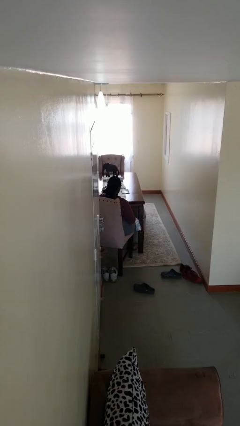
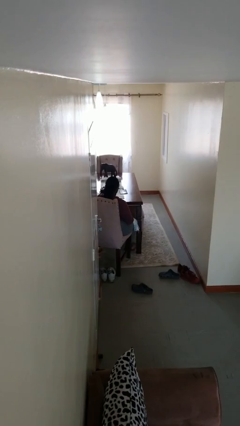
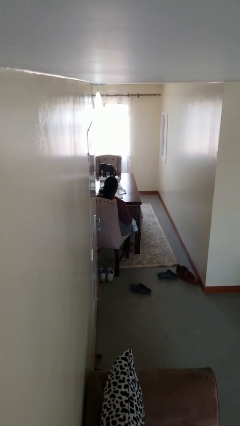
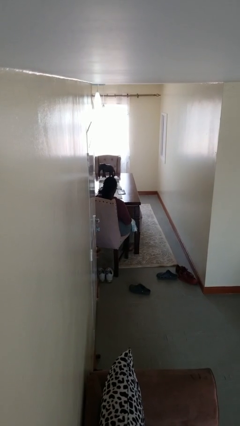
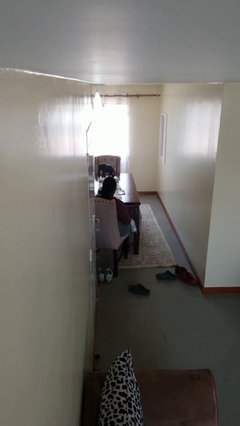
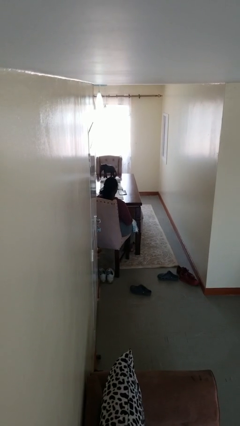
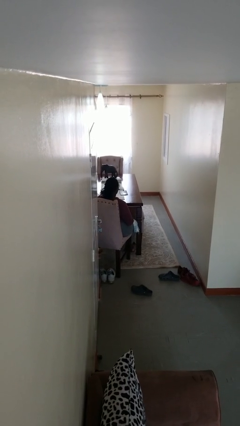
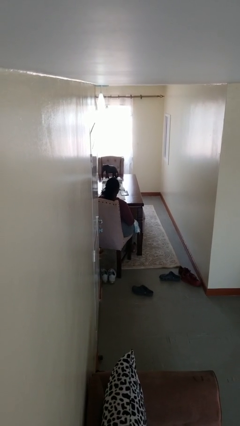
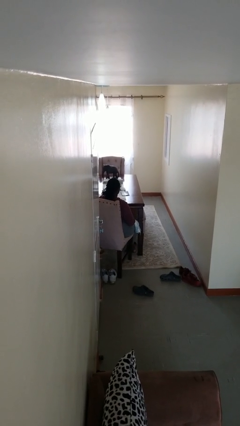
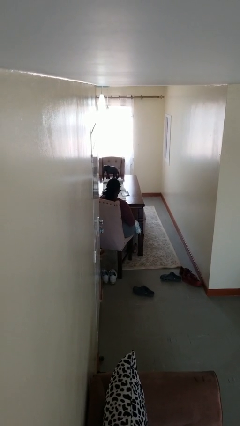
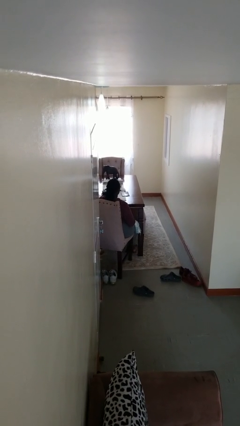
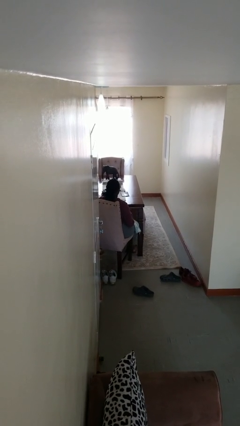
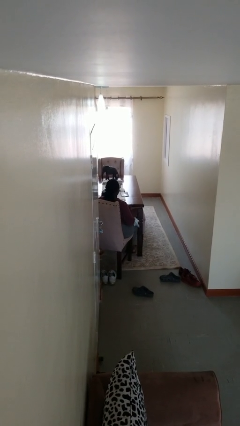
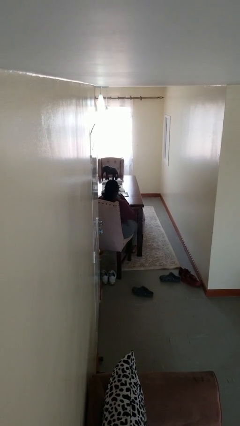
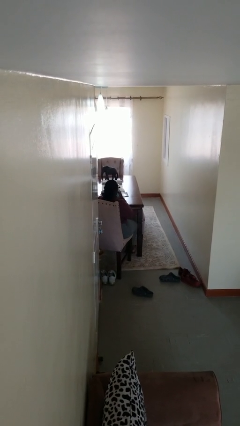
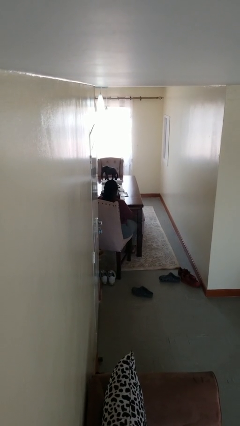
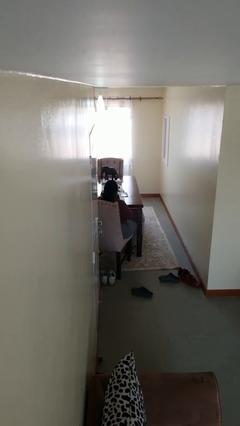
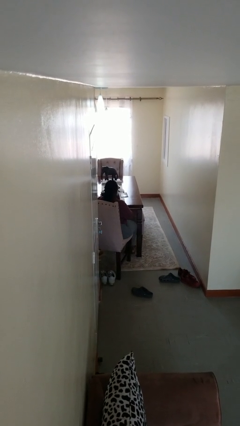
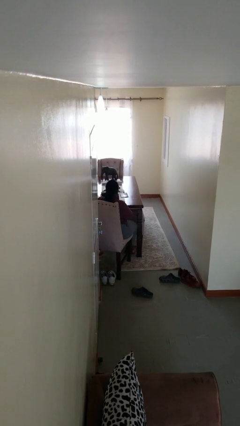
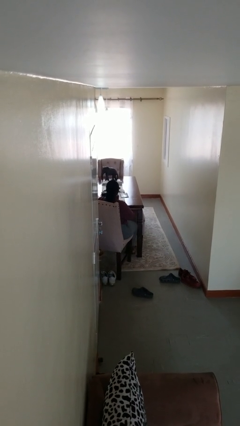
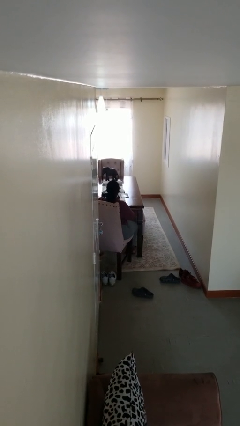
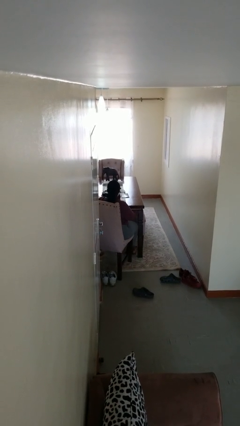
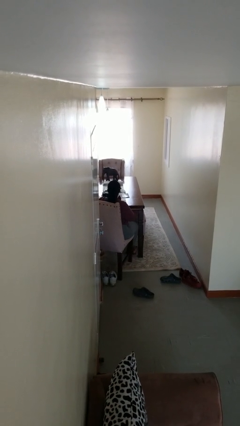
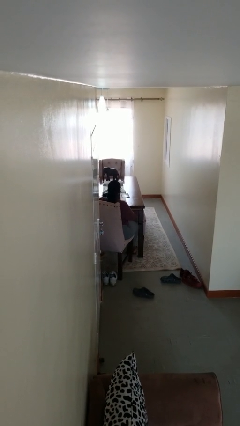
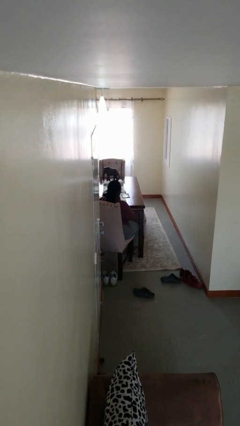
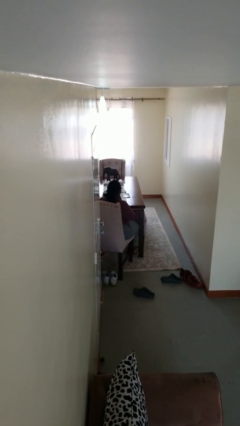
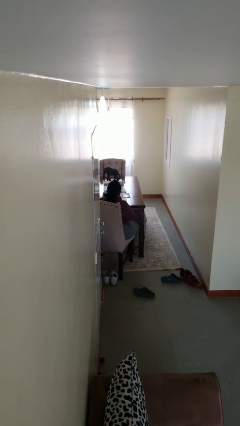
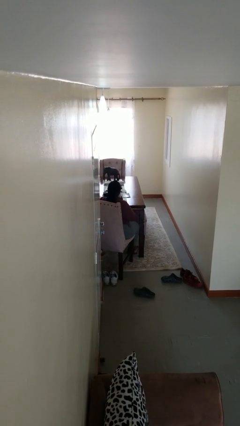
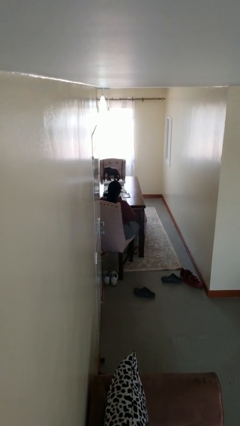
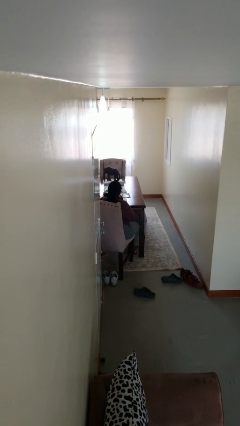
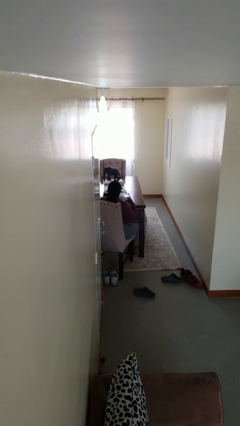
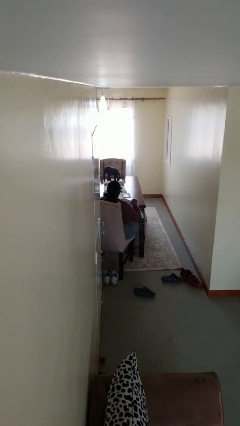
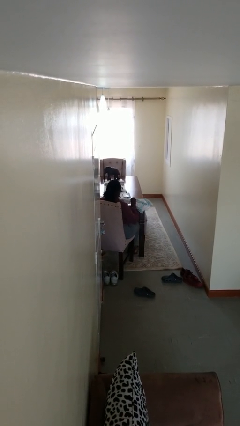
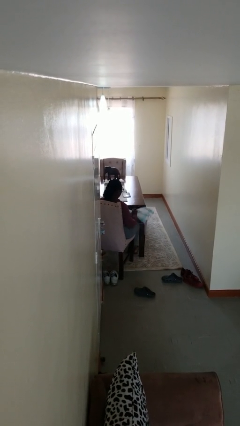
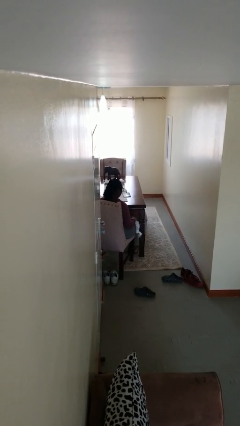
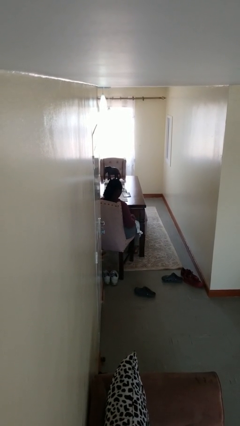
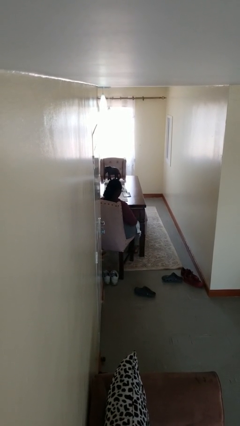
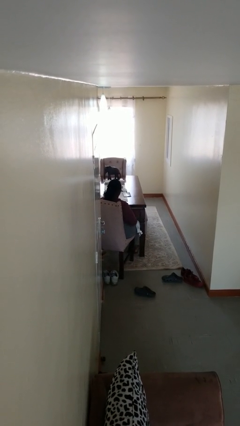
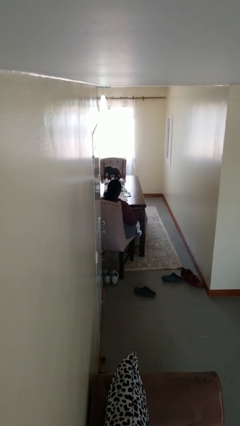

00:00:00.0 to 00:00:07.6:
person wipes mouth with napkin

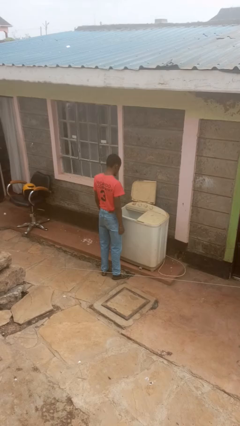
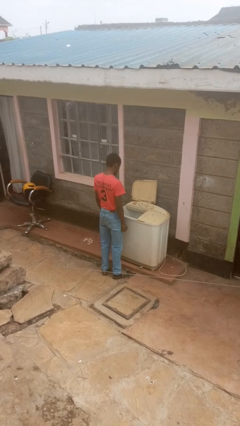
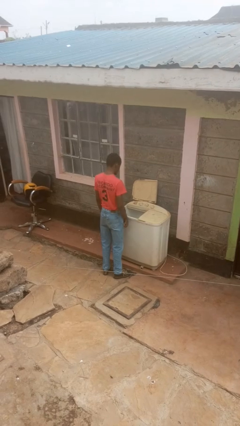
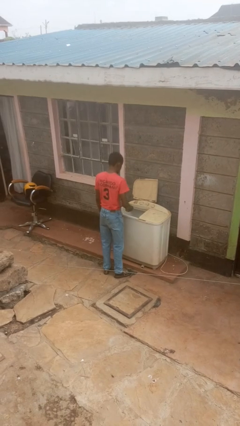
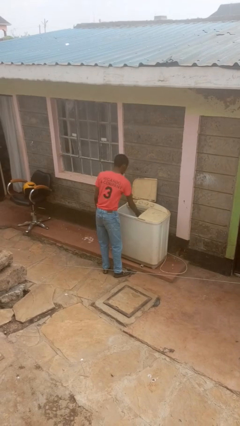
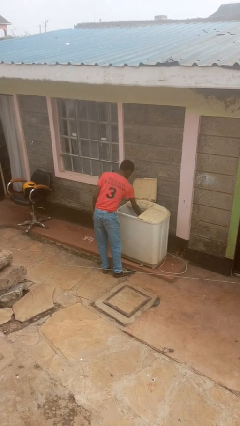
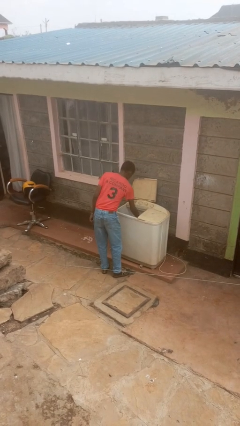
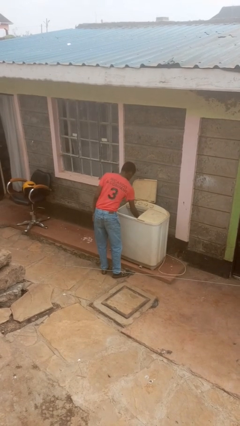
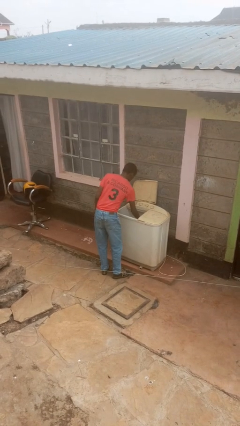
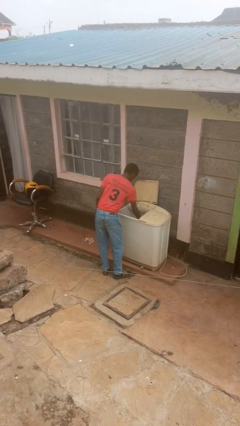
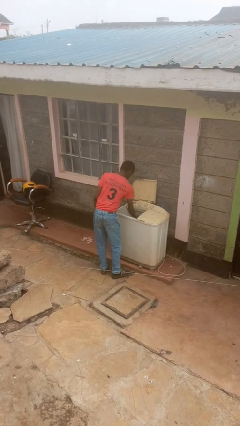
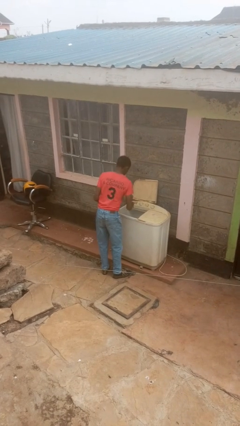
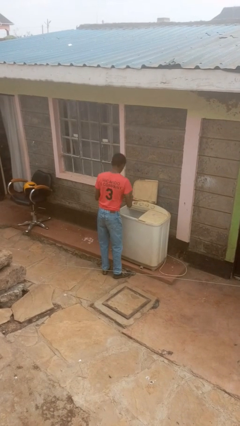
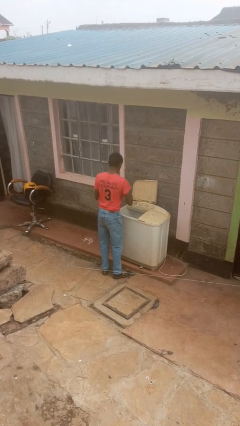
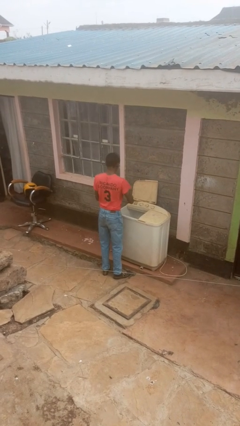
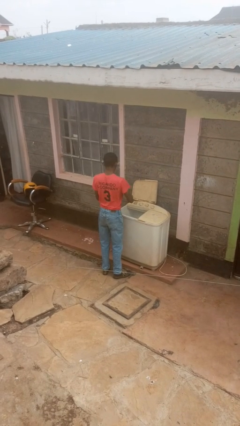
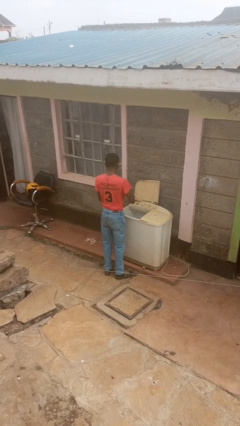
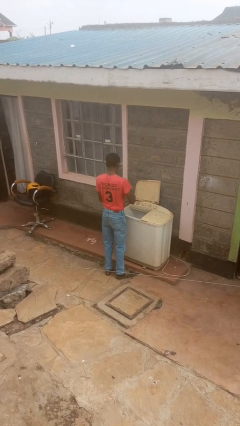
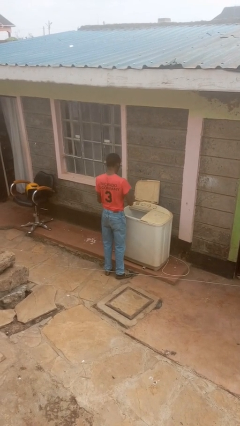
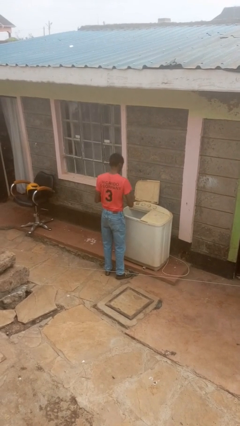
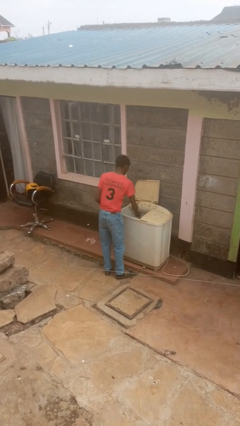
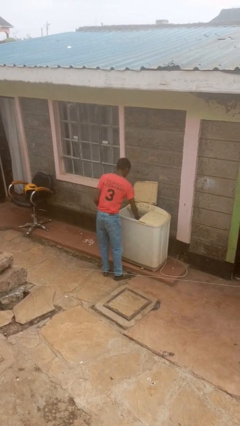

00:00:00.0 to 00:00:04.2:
person cleans dryer lint trap

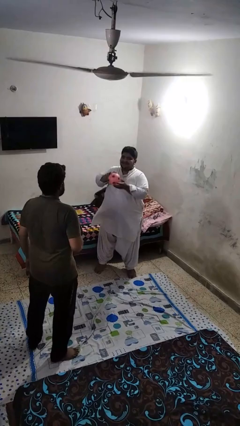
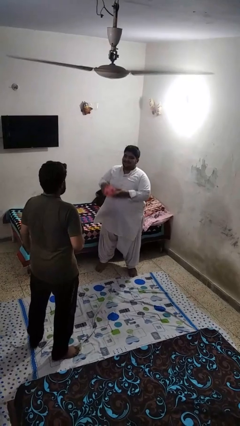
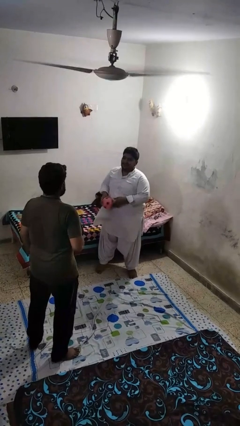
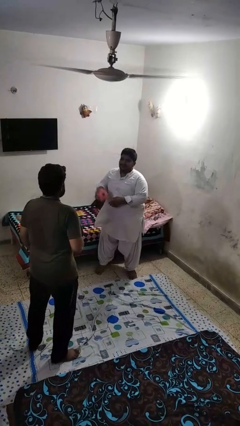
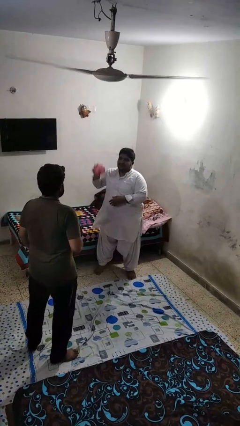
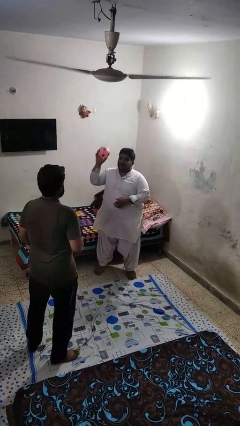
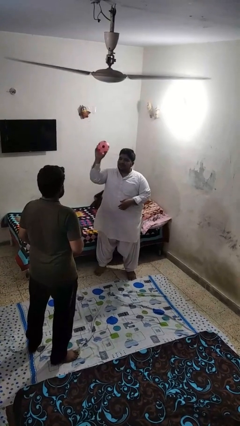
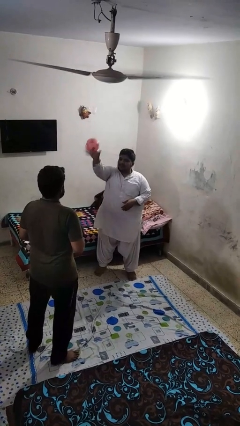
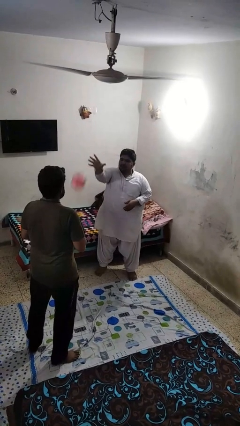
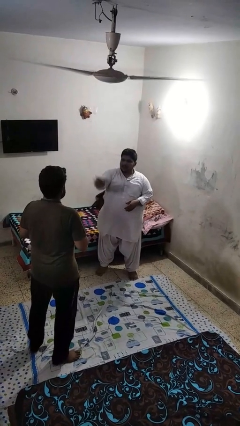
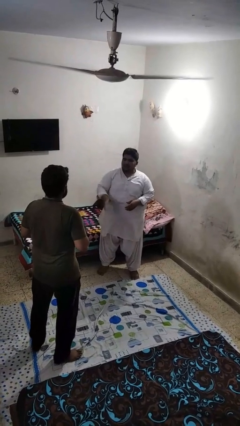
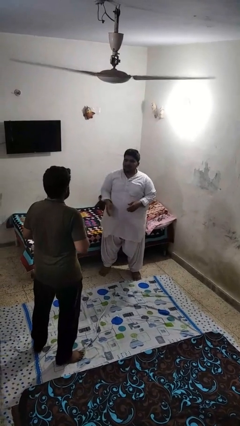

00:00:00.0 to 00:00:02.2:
person throws object to person

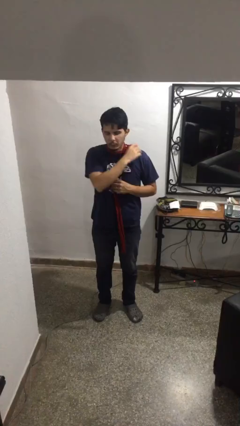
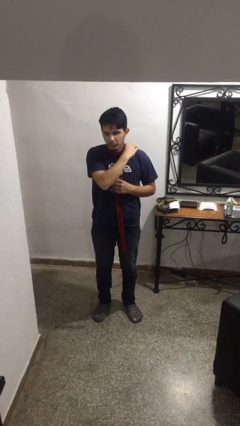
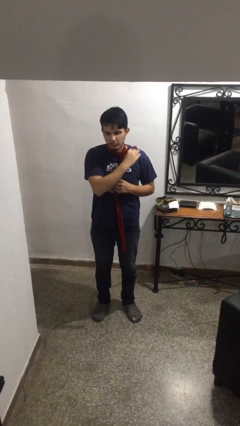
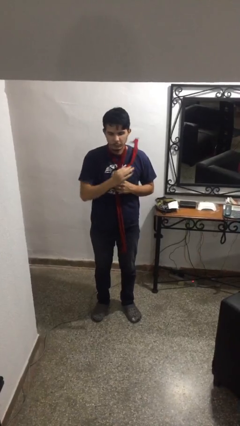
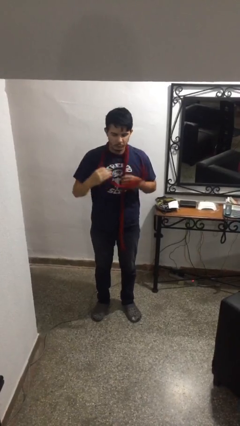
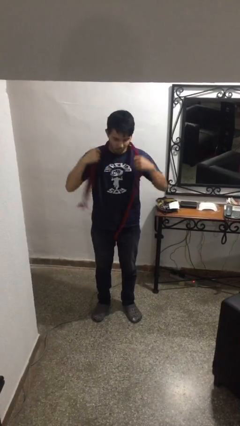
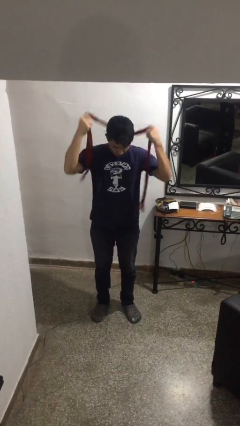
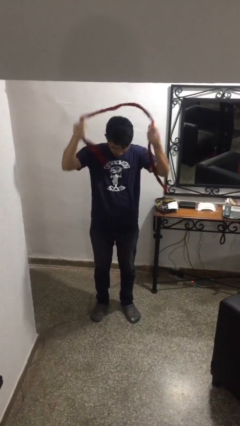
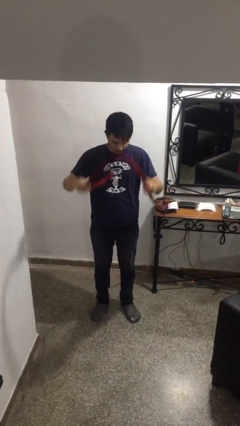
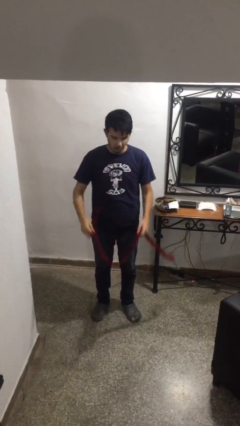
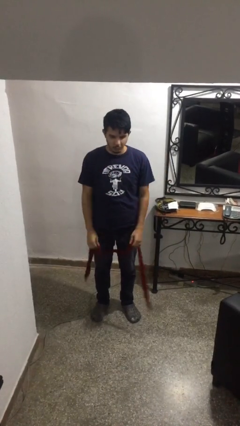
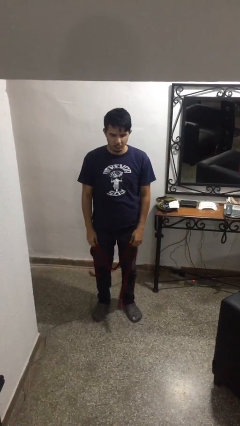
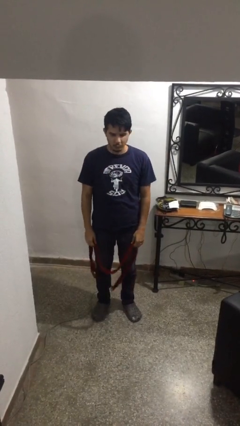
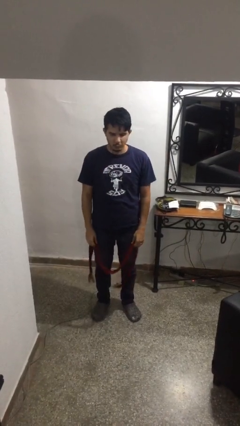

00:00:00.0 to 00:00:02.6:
person takes off scarf

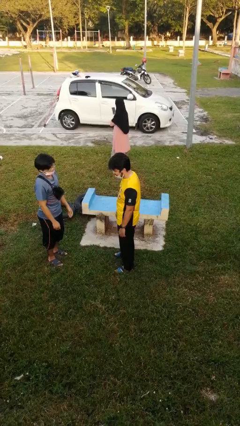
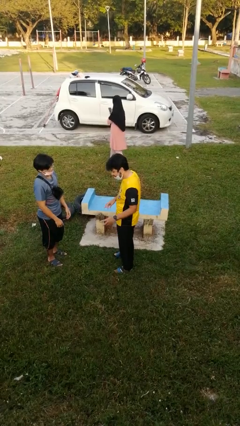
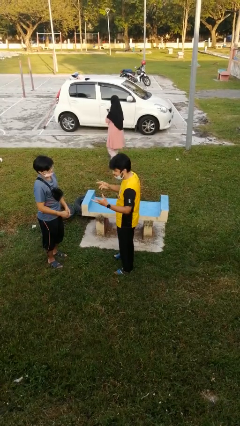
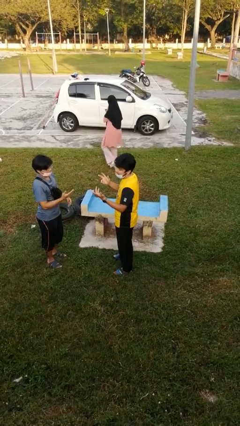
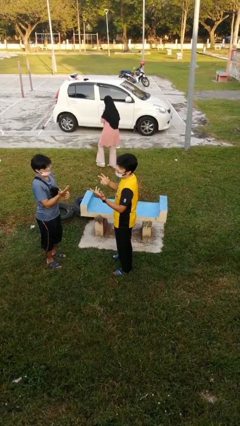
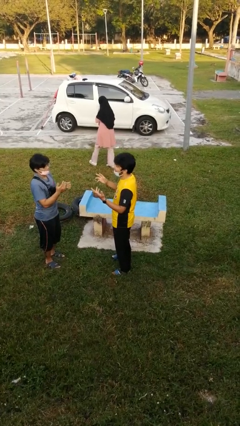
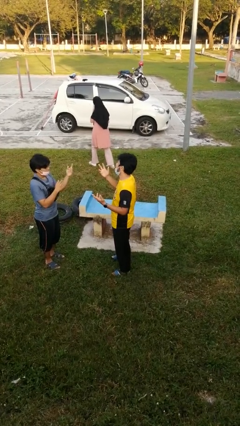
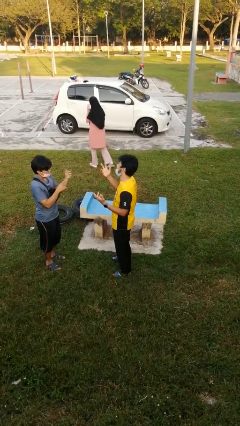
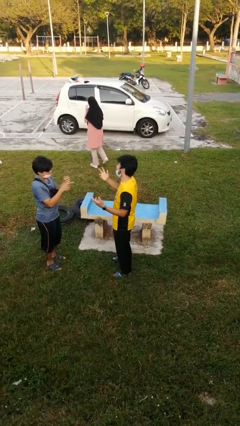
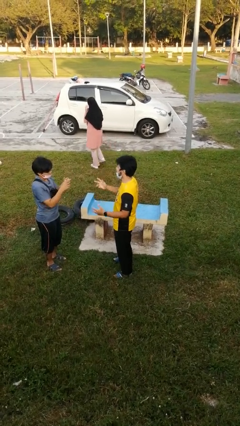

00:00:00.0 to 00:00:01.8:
person talks to person
